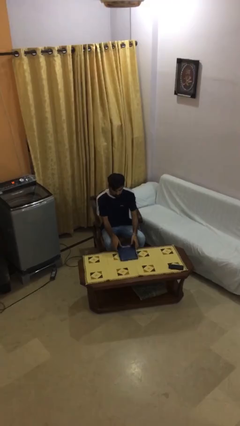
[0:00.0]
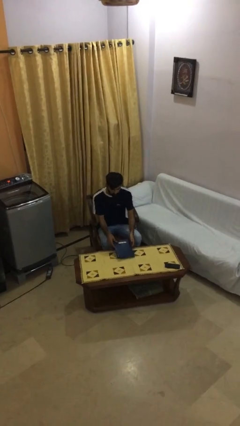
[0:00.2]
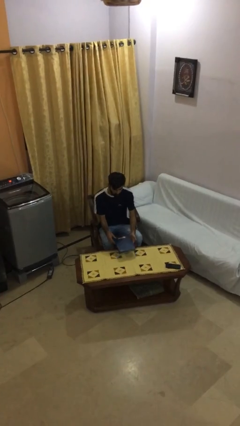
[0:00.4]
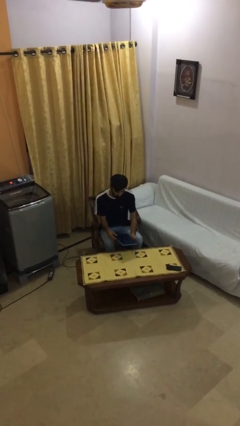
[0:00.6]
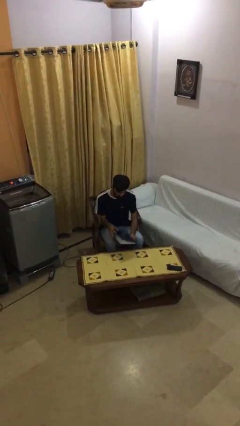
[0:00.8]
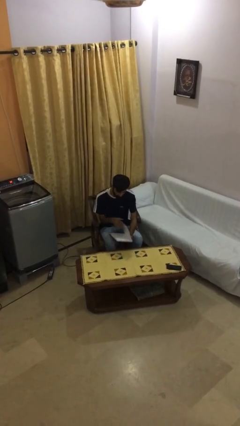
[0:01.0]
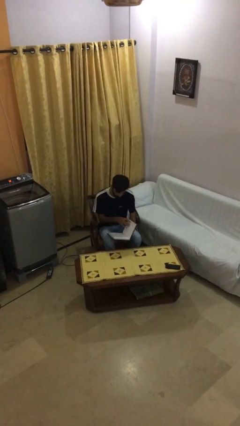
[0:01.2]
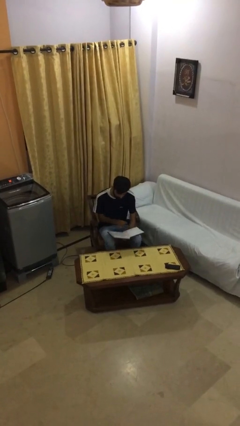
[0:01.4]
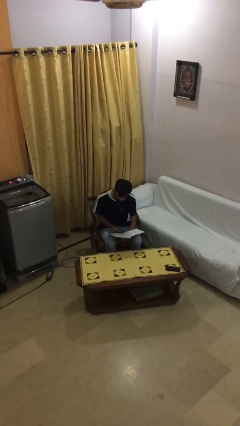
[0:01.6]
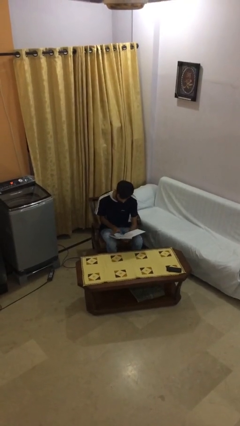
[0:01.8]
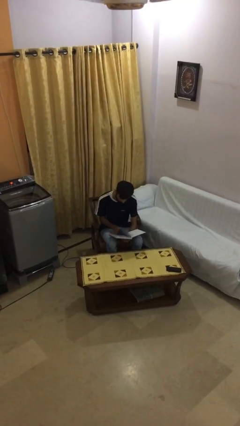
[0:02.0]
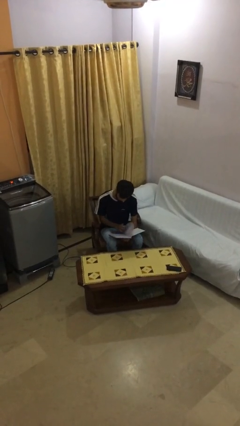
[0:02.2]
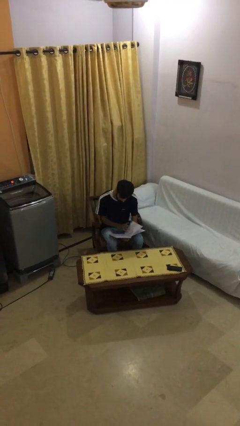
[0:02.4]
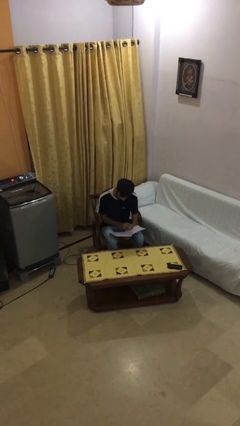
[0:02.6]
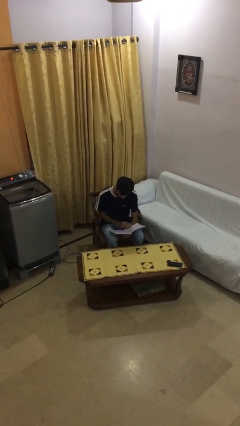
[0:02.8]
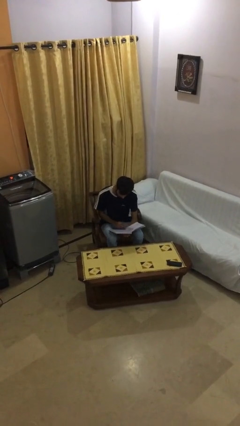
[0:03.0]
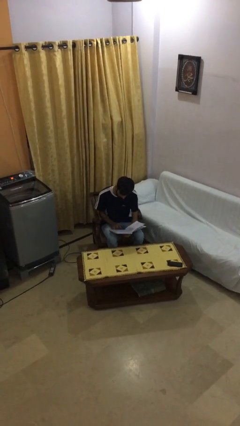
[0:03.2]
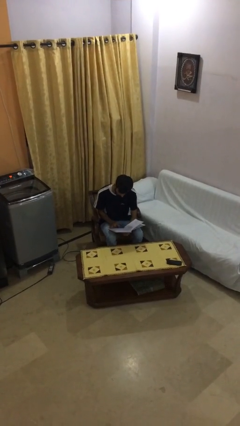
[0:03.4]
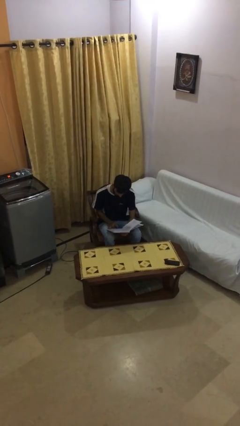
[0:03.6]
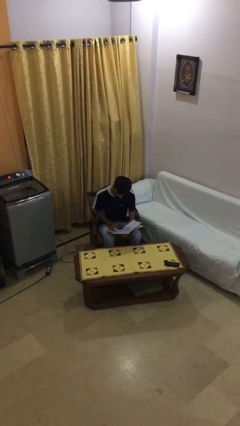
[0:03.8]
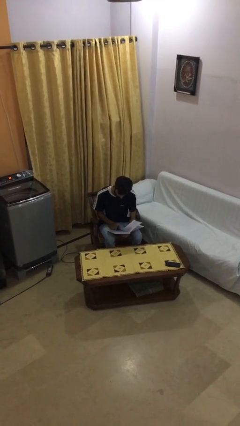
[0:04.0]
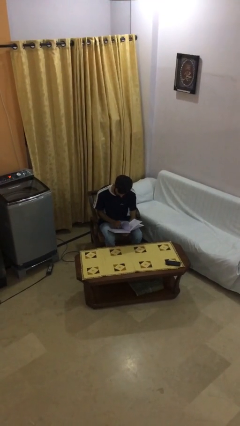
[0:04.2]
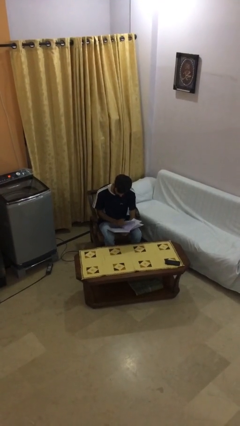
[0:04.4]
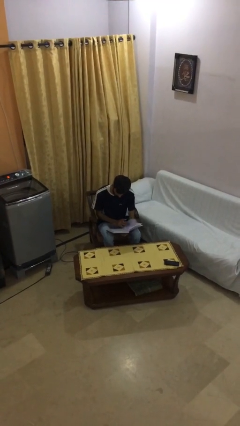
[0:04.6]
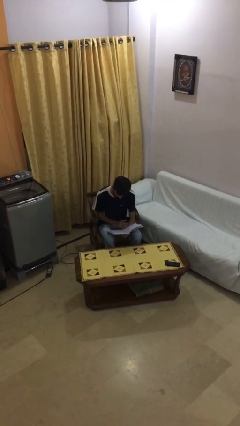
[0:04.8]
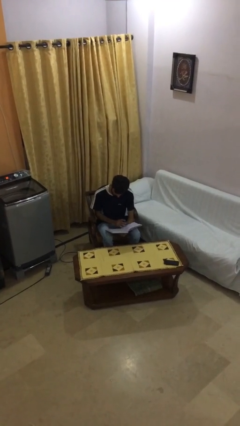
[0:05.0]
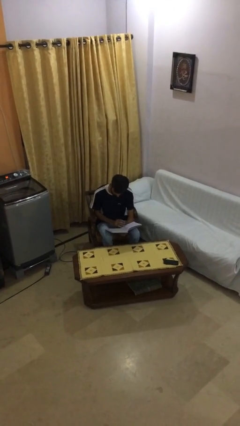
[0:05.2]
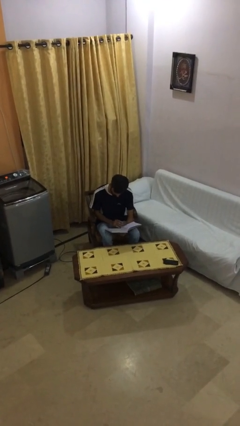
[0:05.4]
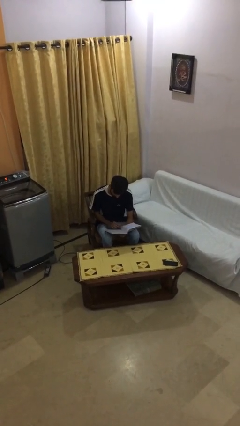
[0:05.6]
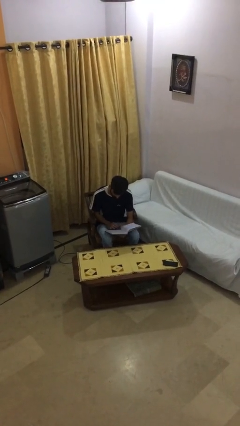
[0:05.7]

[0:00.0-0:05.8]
person reads document

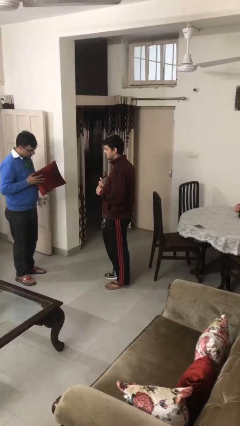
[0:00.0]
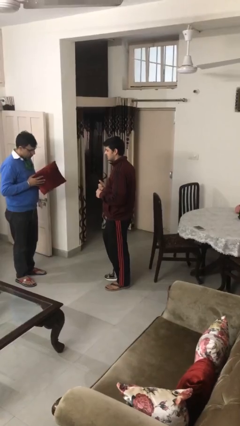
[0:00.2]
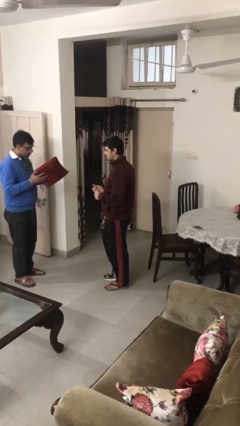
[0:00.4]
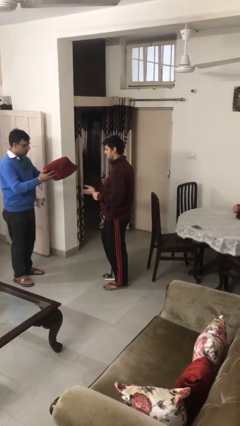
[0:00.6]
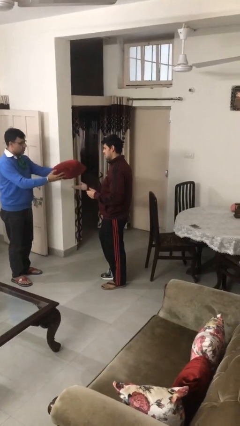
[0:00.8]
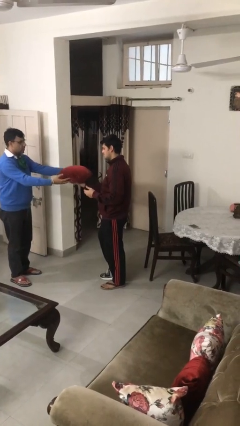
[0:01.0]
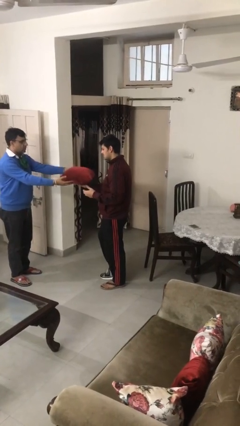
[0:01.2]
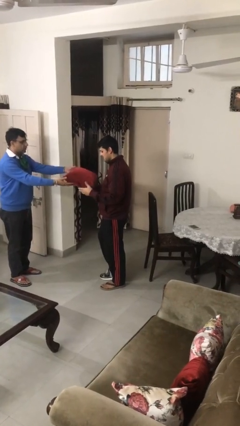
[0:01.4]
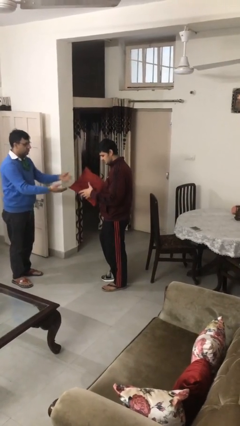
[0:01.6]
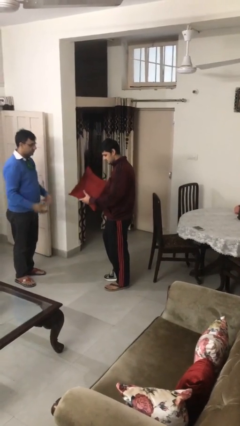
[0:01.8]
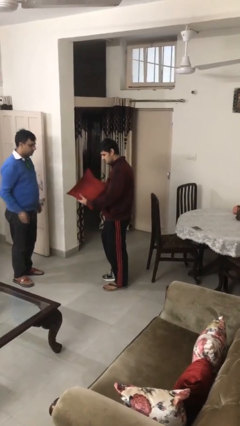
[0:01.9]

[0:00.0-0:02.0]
person transfers object to person

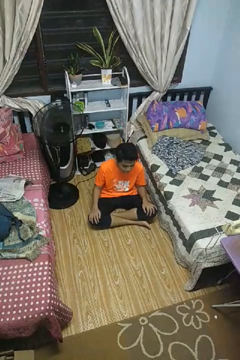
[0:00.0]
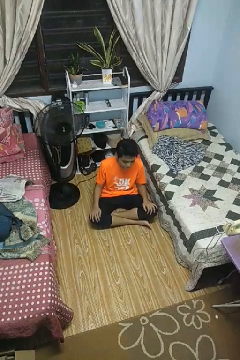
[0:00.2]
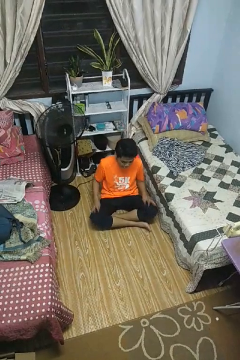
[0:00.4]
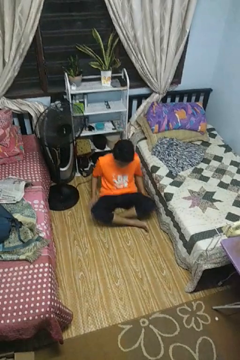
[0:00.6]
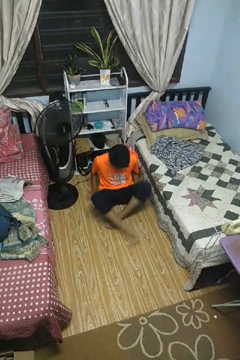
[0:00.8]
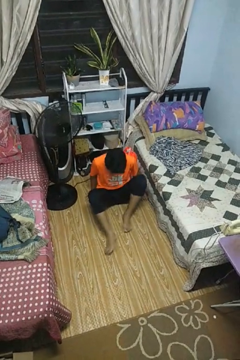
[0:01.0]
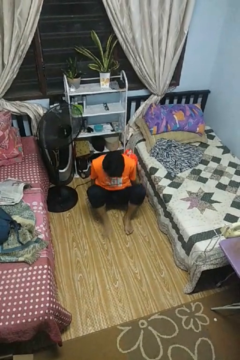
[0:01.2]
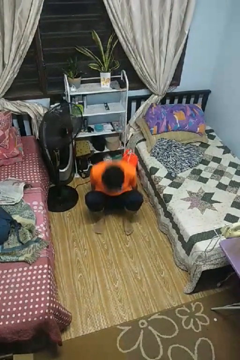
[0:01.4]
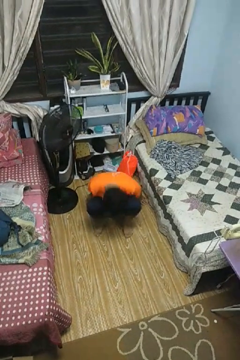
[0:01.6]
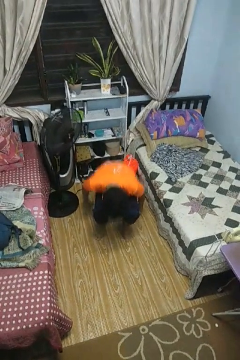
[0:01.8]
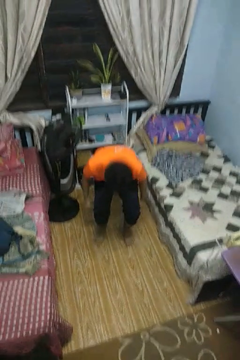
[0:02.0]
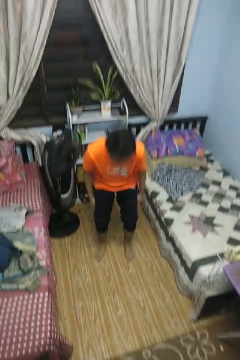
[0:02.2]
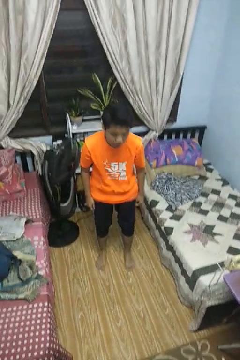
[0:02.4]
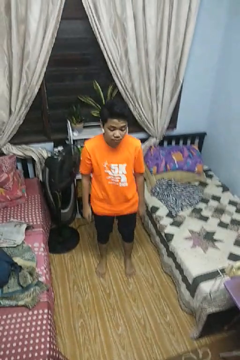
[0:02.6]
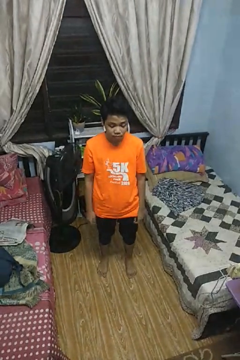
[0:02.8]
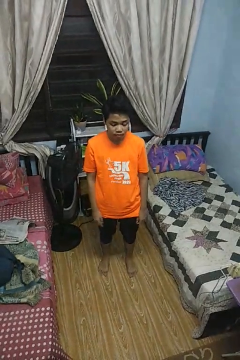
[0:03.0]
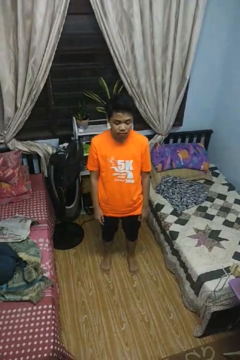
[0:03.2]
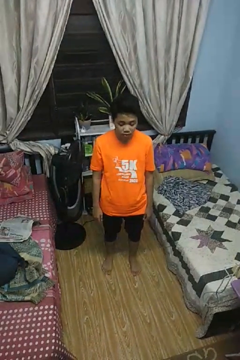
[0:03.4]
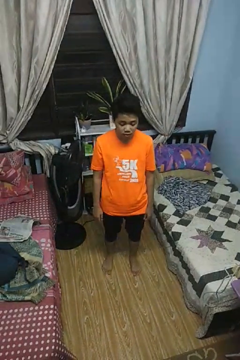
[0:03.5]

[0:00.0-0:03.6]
person stands up from floor

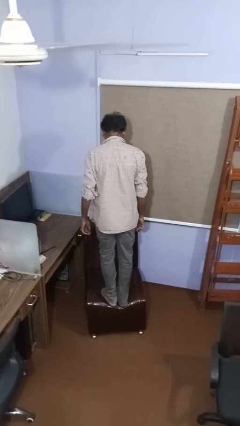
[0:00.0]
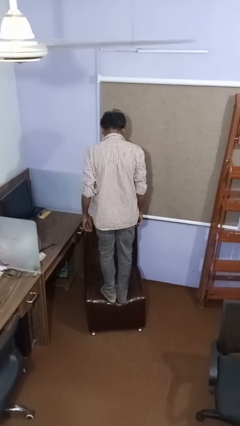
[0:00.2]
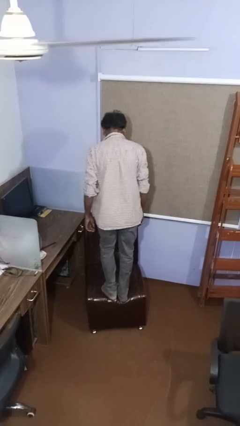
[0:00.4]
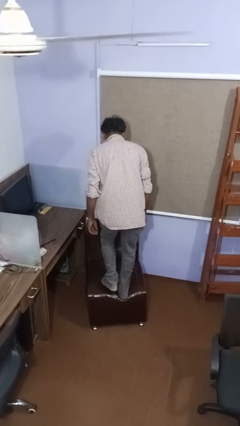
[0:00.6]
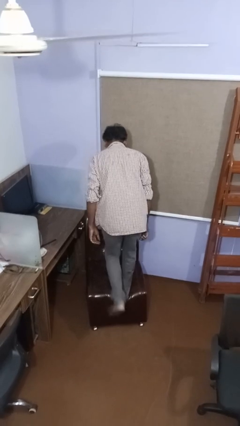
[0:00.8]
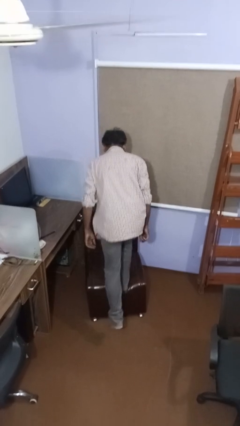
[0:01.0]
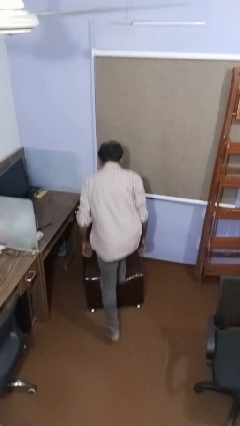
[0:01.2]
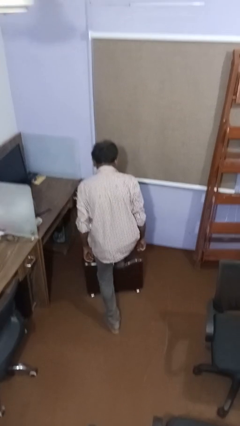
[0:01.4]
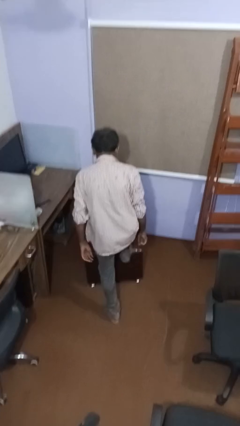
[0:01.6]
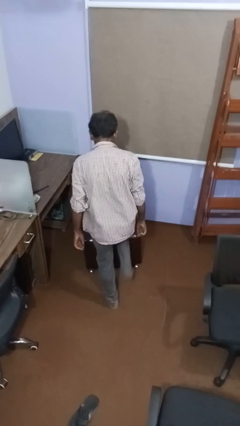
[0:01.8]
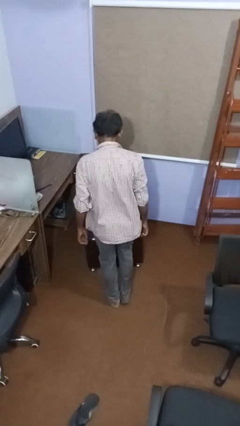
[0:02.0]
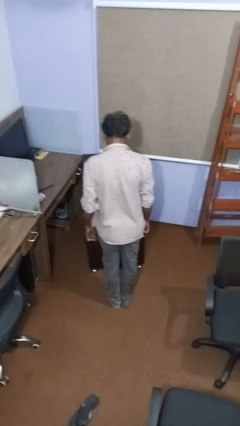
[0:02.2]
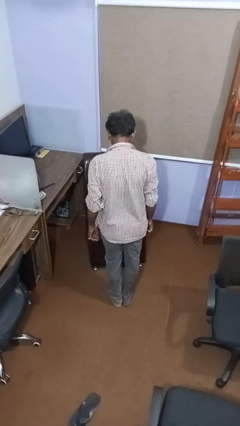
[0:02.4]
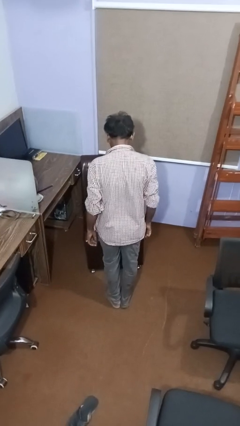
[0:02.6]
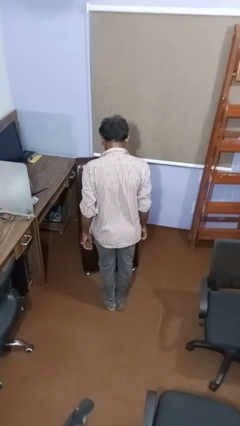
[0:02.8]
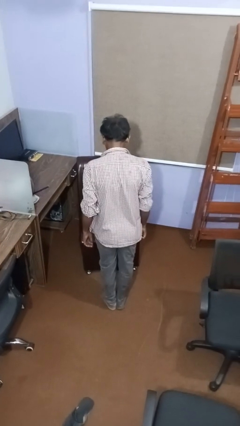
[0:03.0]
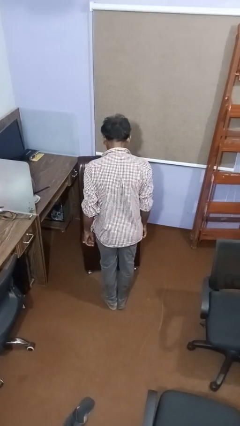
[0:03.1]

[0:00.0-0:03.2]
person climbs off couch

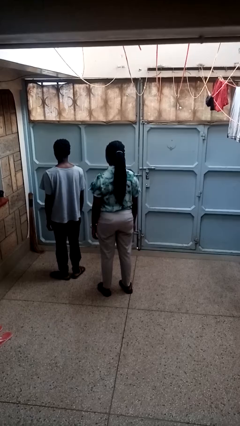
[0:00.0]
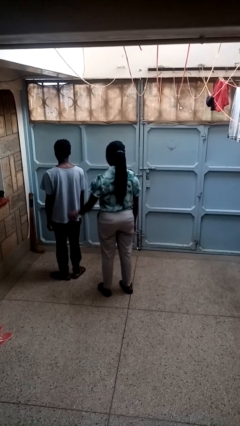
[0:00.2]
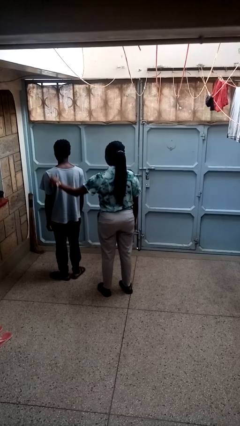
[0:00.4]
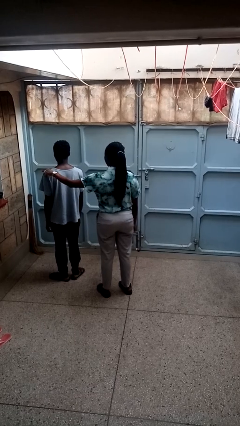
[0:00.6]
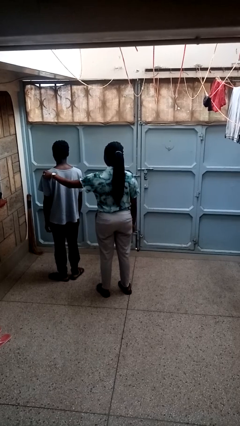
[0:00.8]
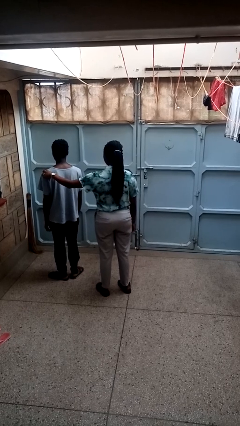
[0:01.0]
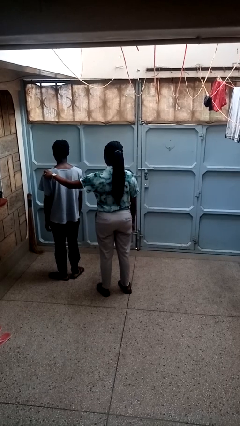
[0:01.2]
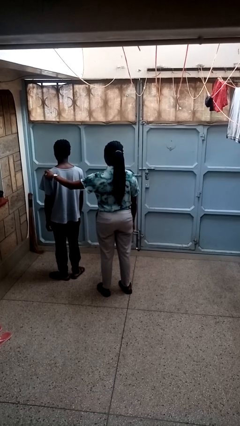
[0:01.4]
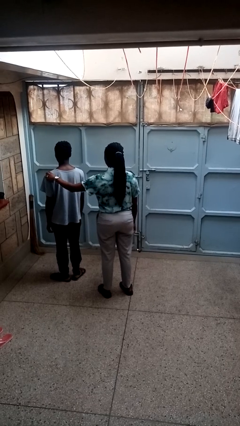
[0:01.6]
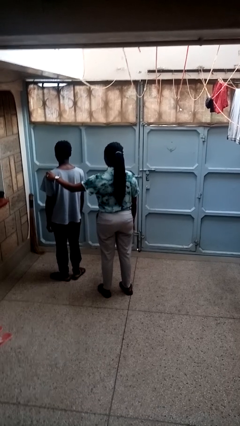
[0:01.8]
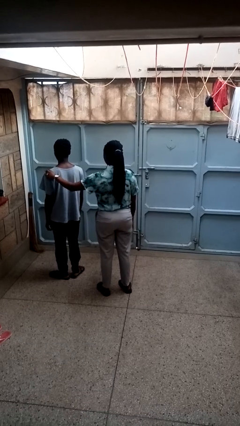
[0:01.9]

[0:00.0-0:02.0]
person grabs person by shoulder

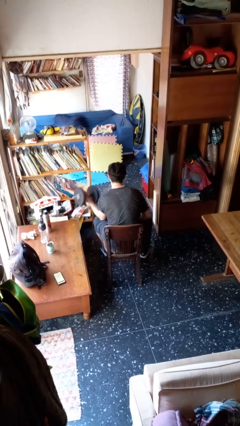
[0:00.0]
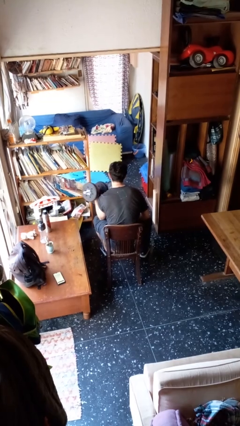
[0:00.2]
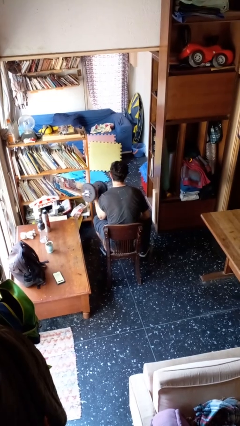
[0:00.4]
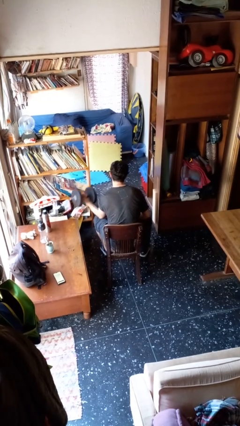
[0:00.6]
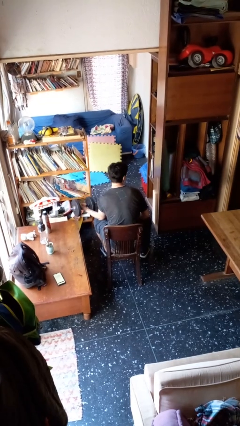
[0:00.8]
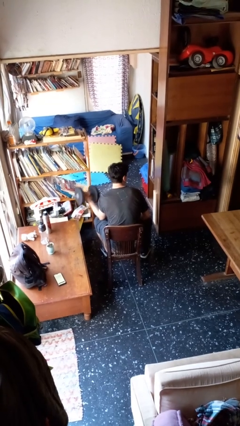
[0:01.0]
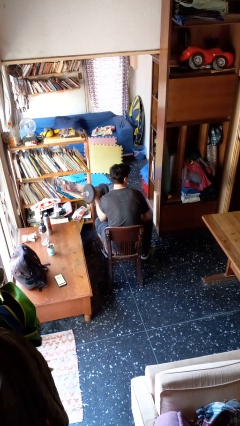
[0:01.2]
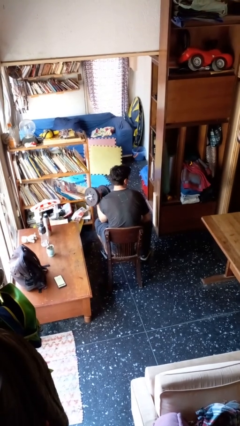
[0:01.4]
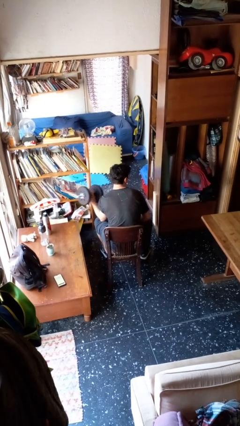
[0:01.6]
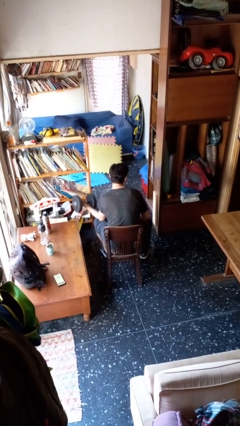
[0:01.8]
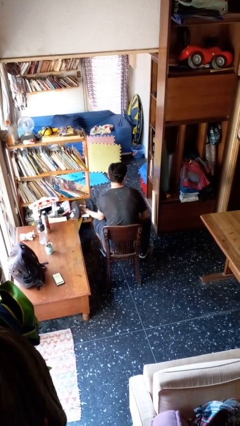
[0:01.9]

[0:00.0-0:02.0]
person lifts dumbbells
